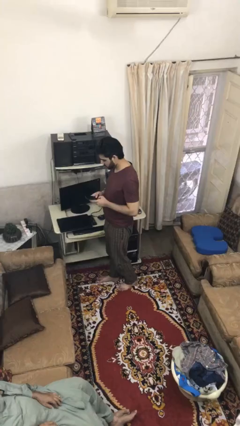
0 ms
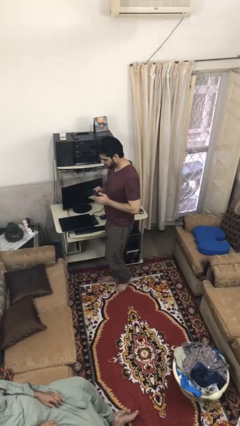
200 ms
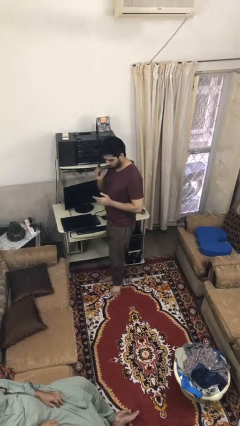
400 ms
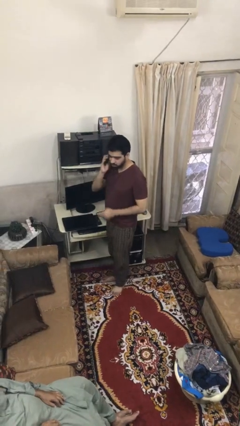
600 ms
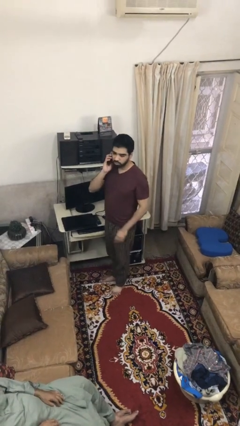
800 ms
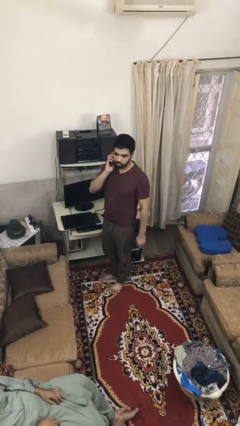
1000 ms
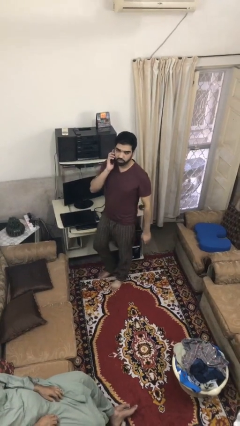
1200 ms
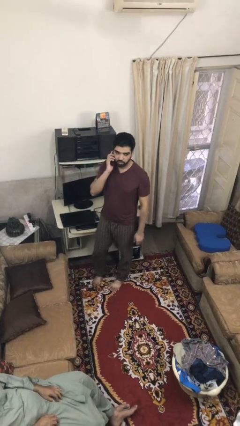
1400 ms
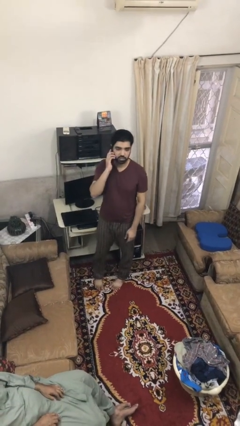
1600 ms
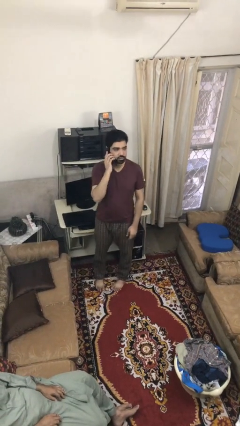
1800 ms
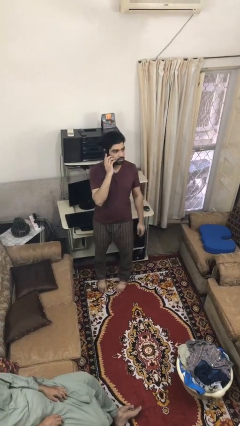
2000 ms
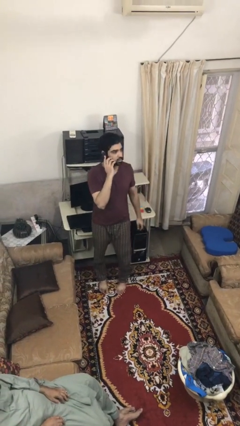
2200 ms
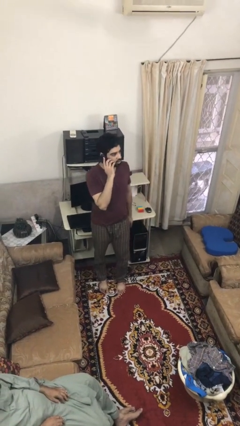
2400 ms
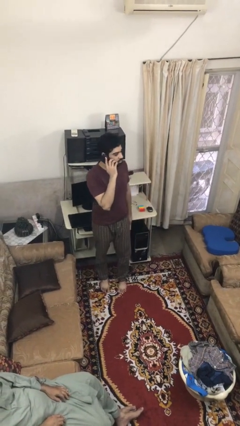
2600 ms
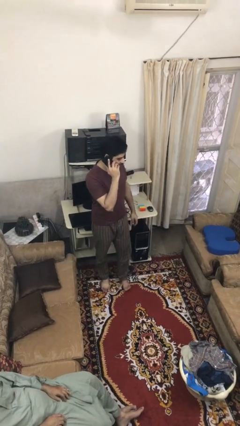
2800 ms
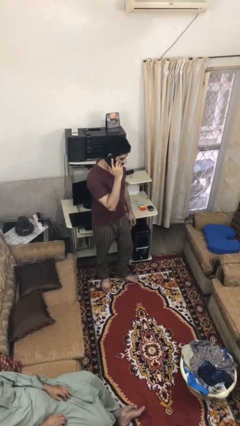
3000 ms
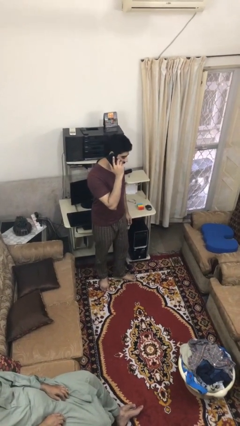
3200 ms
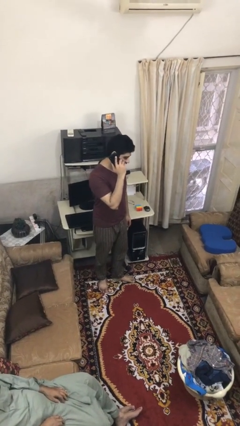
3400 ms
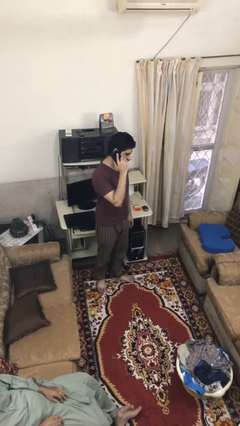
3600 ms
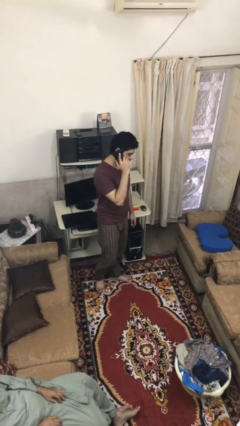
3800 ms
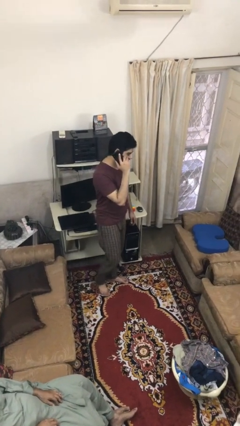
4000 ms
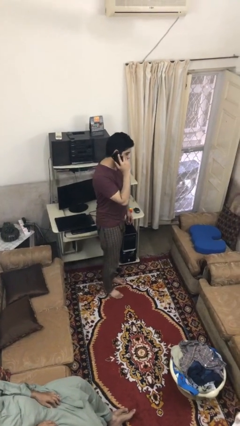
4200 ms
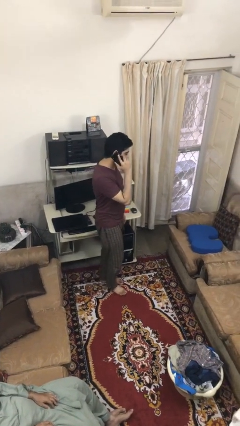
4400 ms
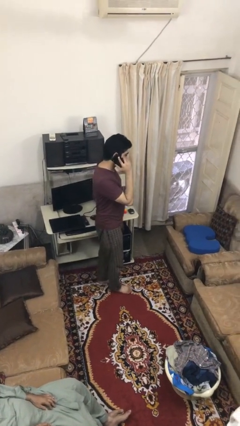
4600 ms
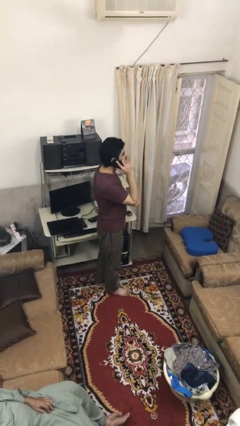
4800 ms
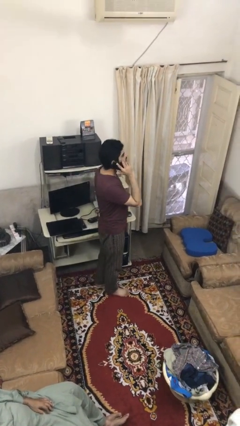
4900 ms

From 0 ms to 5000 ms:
person talks on phone

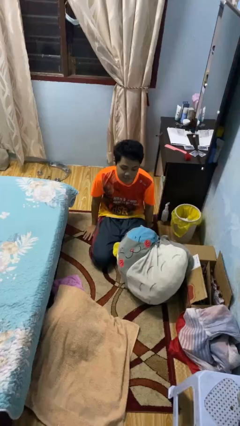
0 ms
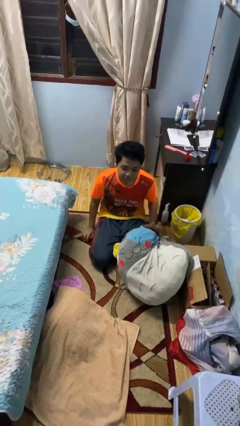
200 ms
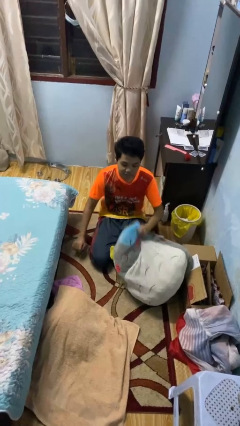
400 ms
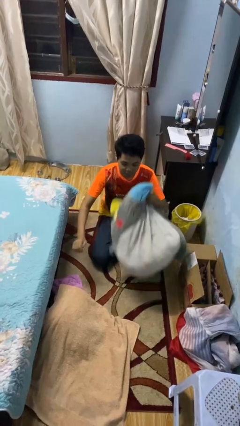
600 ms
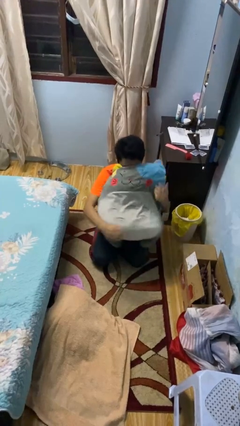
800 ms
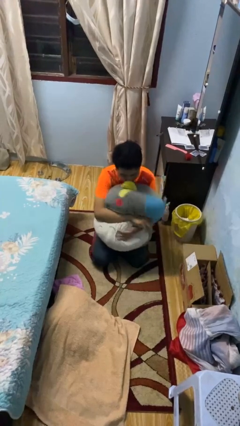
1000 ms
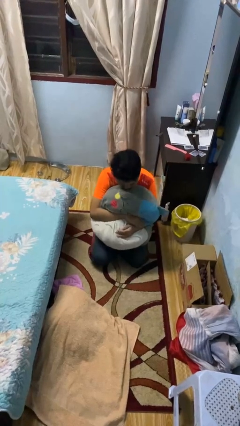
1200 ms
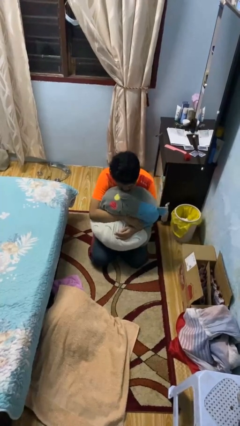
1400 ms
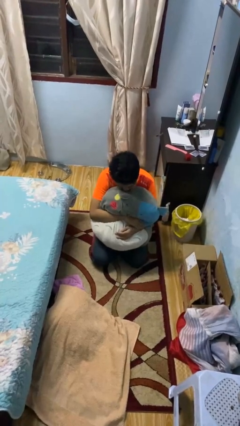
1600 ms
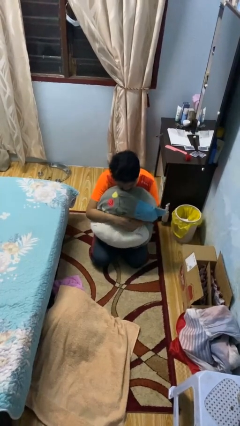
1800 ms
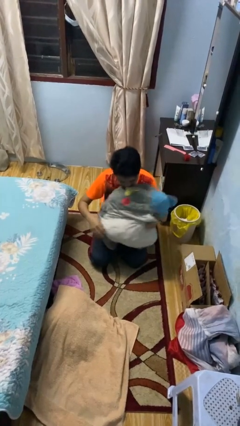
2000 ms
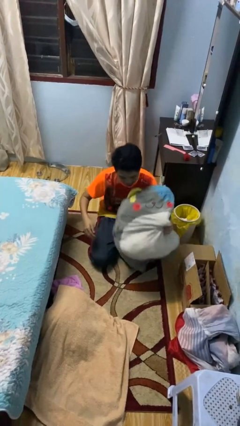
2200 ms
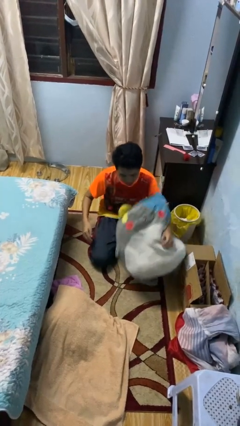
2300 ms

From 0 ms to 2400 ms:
person hugs stuffed animal

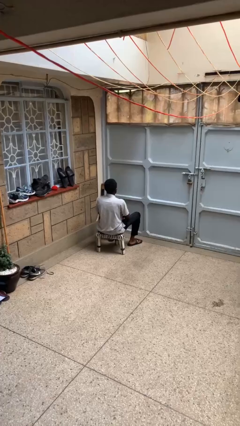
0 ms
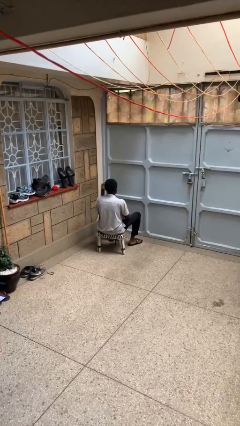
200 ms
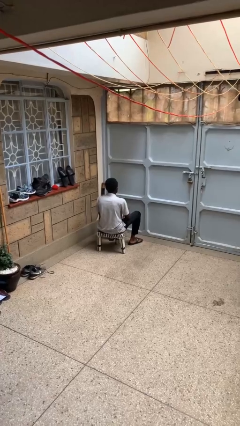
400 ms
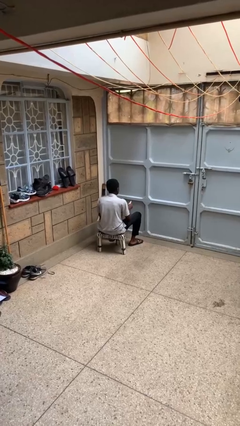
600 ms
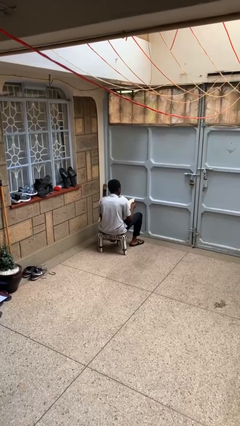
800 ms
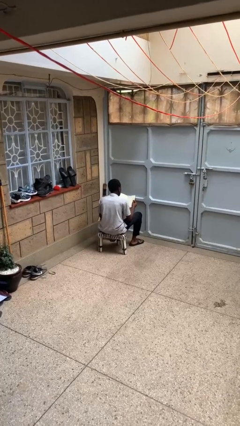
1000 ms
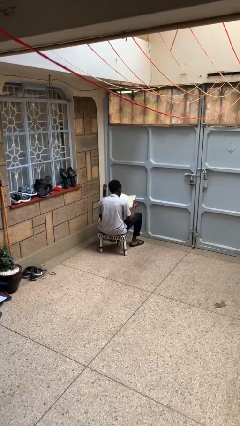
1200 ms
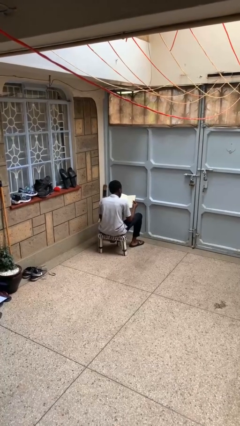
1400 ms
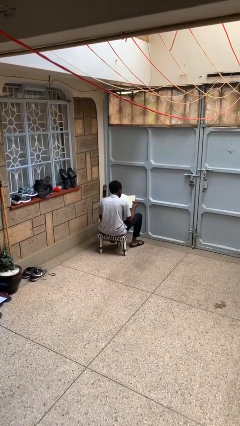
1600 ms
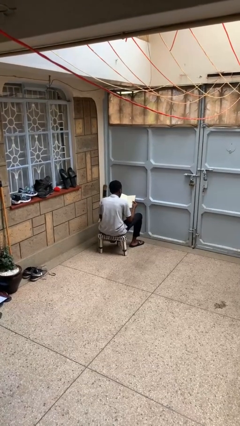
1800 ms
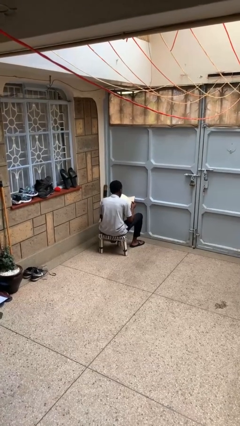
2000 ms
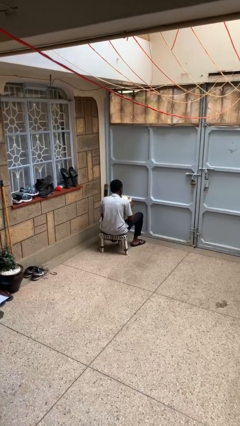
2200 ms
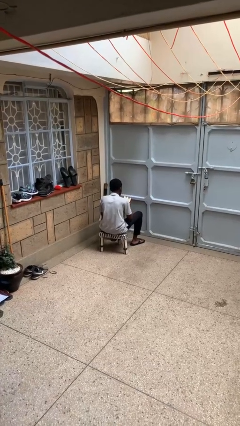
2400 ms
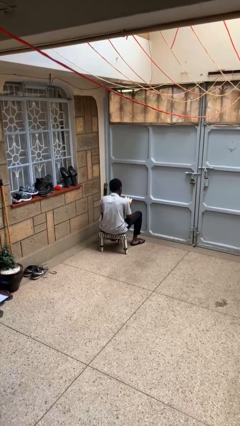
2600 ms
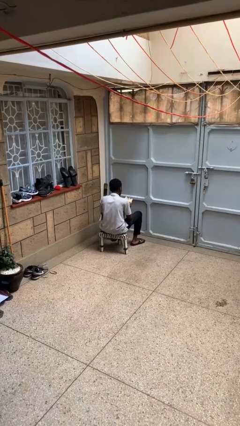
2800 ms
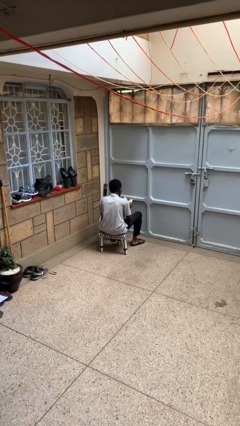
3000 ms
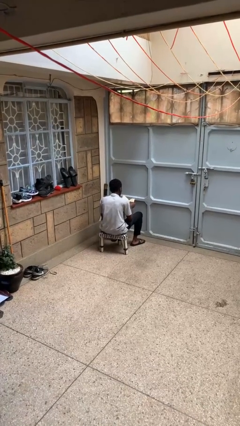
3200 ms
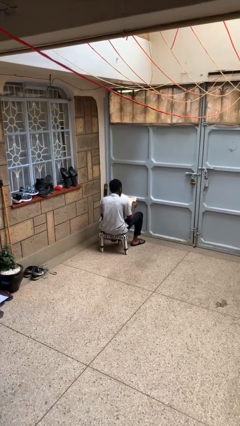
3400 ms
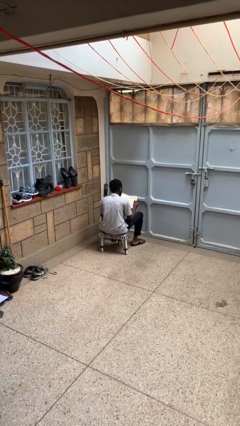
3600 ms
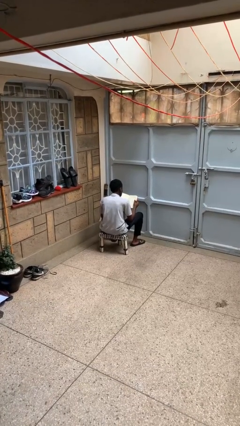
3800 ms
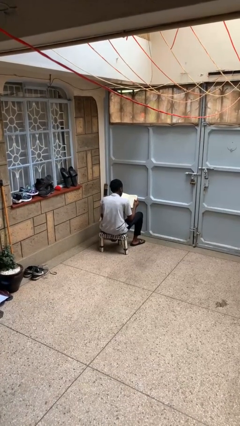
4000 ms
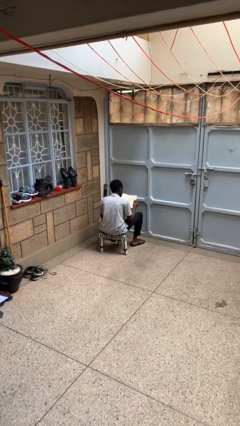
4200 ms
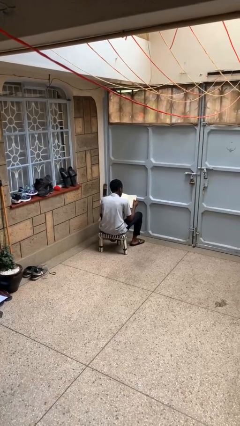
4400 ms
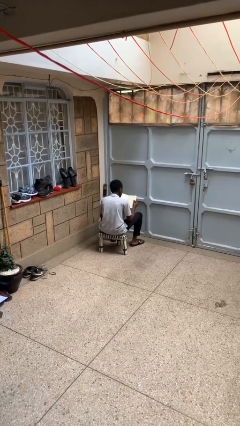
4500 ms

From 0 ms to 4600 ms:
person reads book

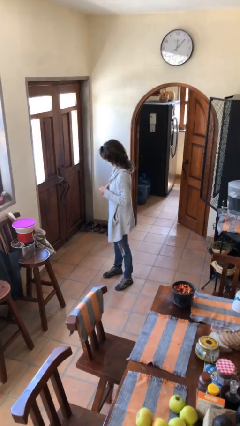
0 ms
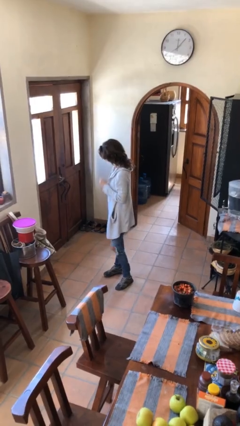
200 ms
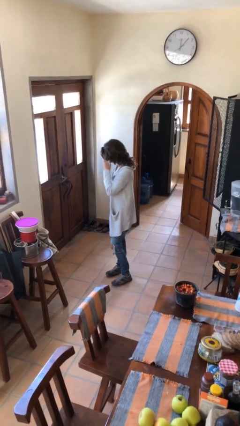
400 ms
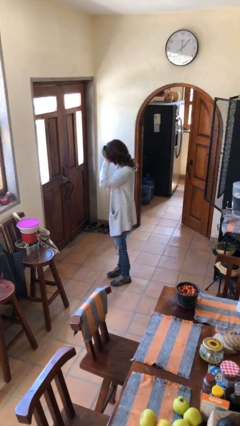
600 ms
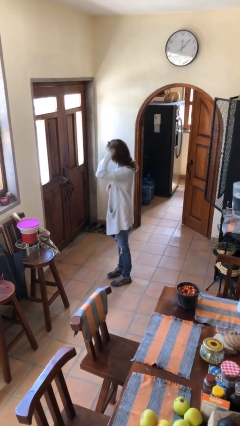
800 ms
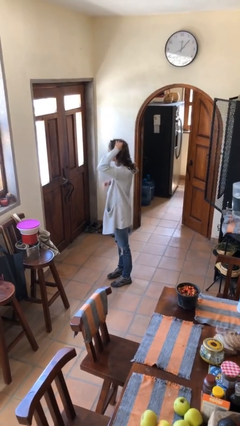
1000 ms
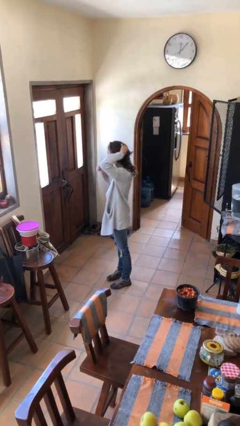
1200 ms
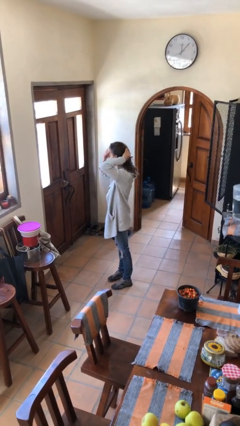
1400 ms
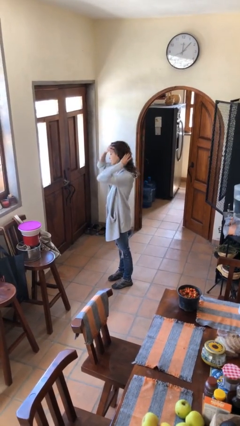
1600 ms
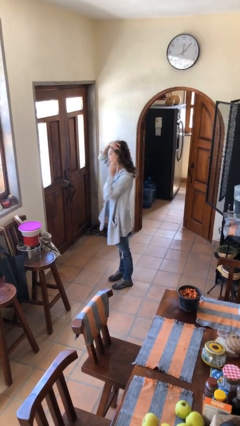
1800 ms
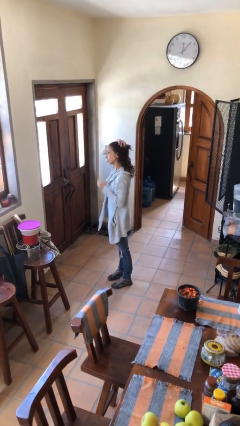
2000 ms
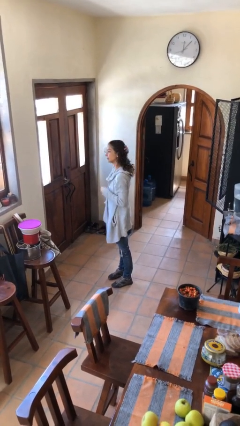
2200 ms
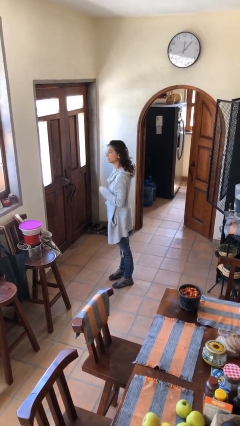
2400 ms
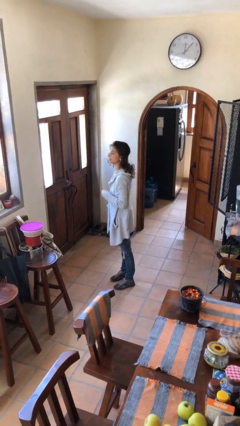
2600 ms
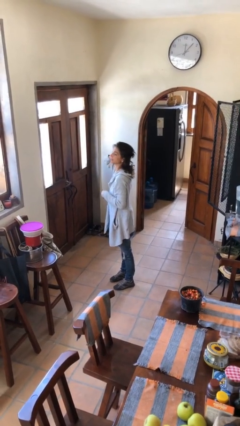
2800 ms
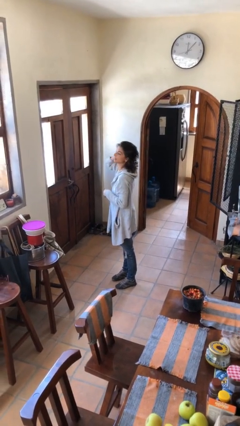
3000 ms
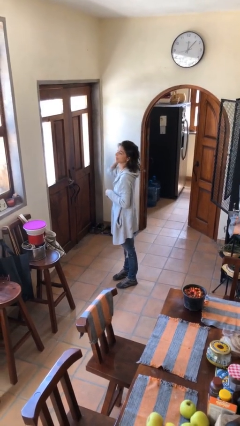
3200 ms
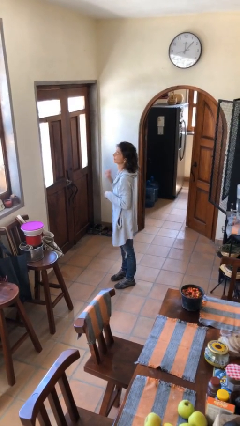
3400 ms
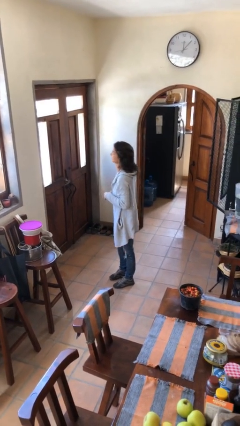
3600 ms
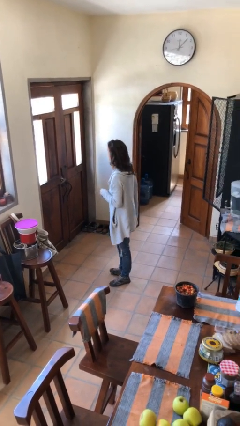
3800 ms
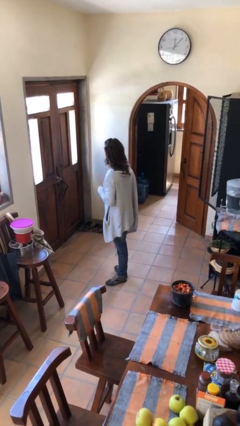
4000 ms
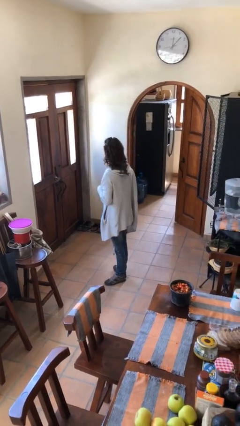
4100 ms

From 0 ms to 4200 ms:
person strokes hair

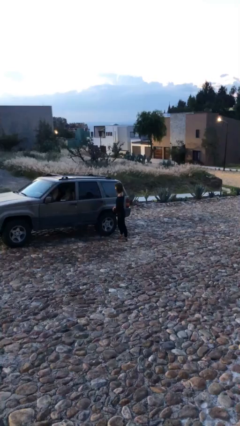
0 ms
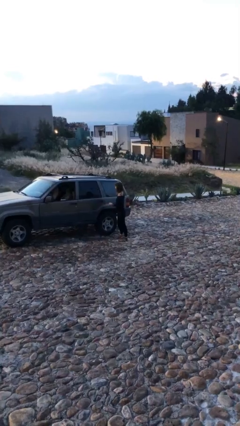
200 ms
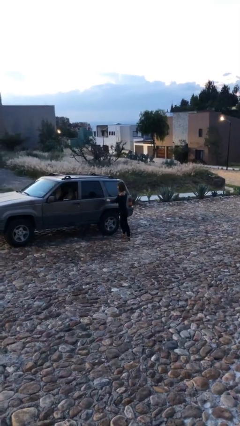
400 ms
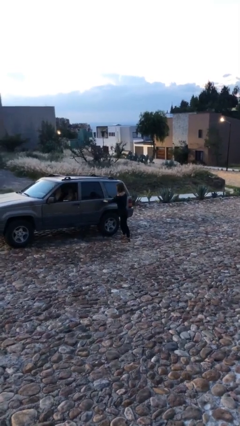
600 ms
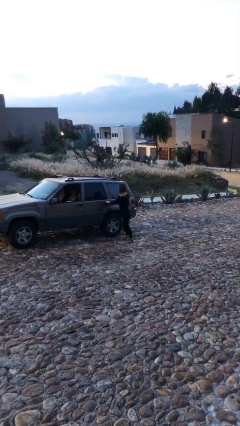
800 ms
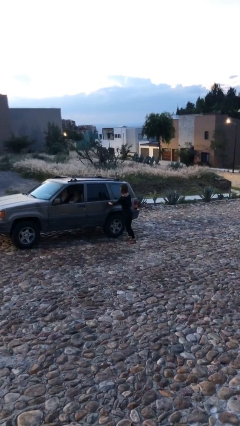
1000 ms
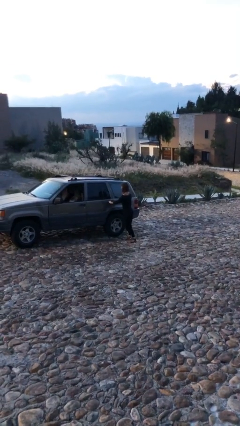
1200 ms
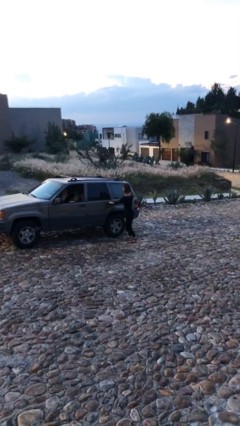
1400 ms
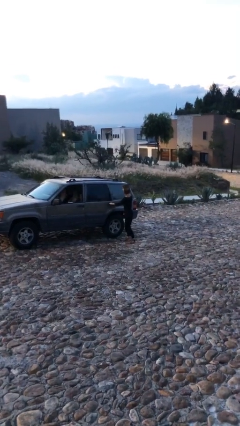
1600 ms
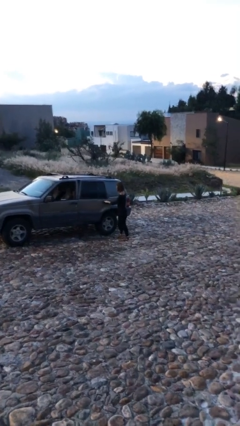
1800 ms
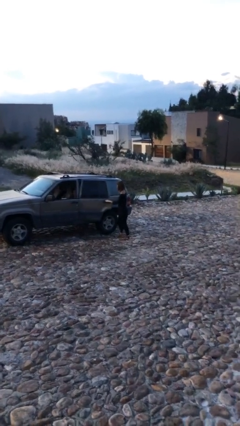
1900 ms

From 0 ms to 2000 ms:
person opens car door
